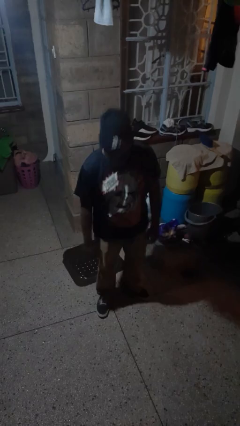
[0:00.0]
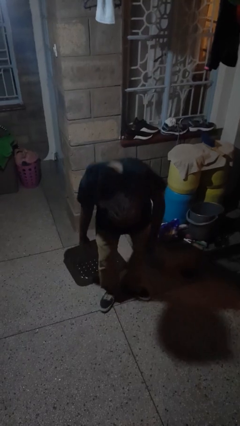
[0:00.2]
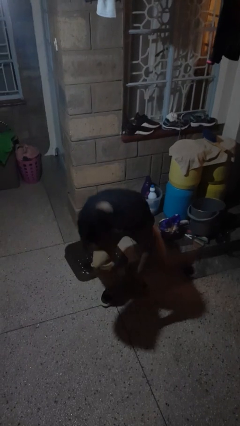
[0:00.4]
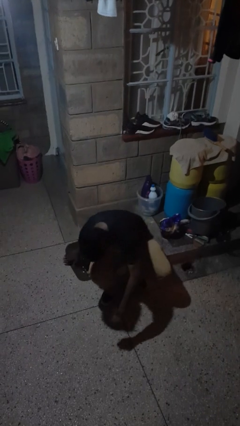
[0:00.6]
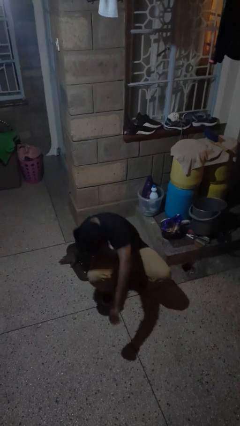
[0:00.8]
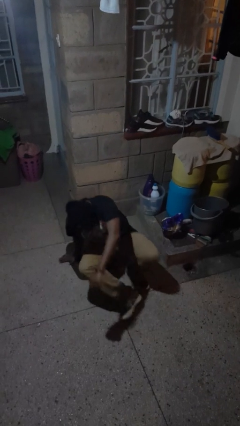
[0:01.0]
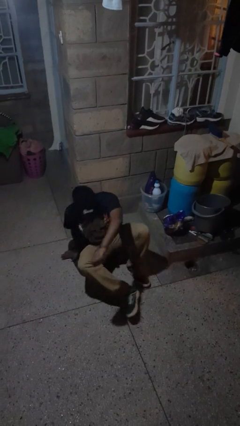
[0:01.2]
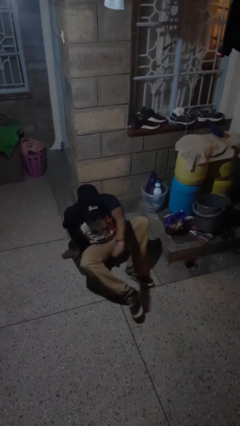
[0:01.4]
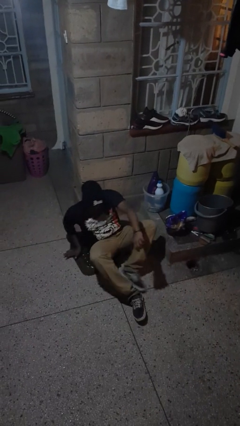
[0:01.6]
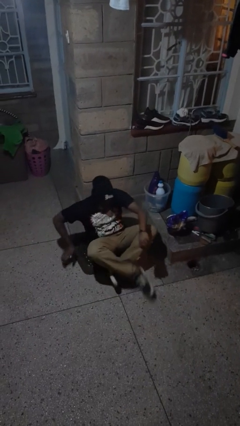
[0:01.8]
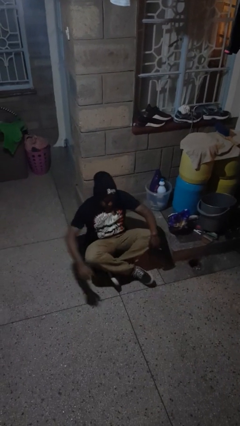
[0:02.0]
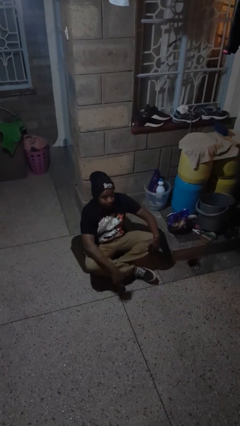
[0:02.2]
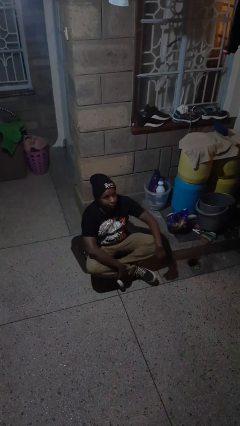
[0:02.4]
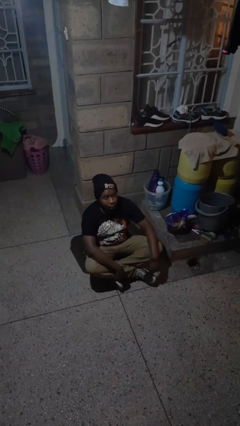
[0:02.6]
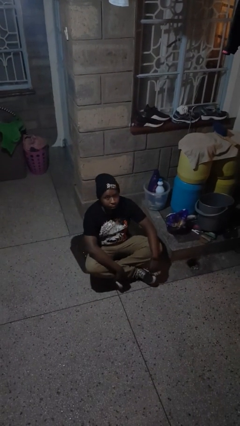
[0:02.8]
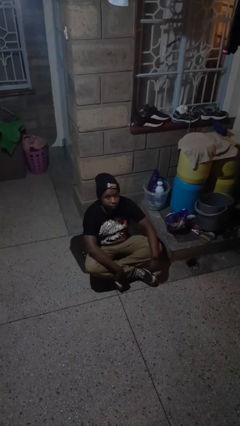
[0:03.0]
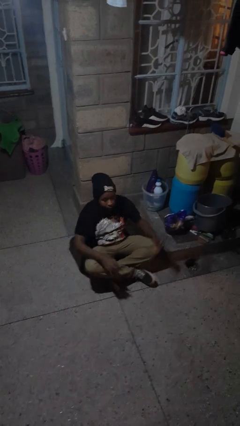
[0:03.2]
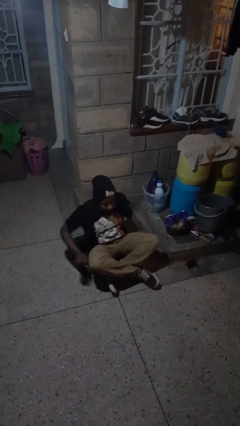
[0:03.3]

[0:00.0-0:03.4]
person sits crisscross

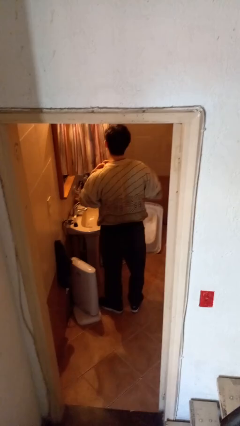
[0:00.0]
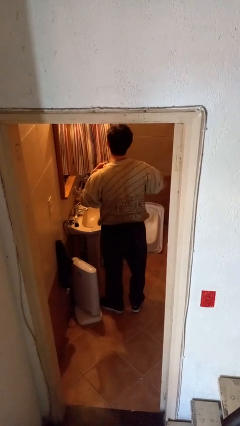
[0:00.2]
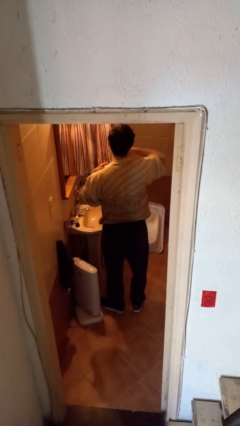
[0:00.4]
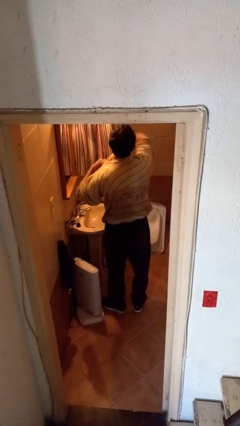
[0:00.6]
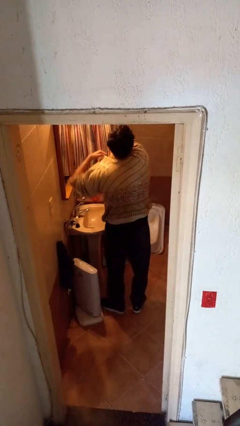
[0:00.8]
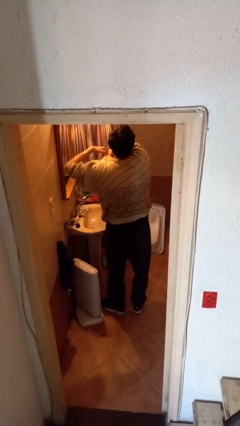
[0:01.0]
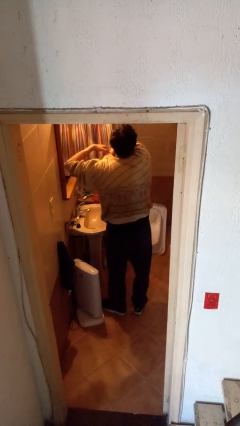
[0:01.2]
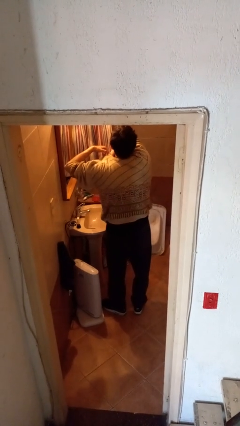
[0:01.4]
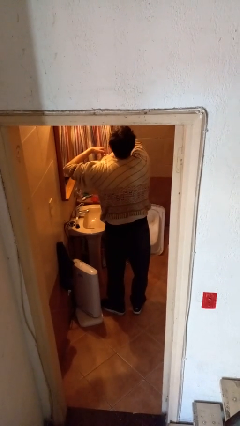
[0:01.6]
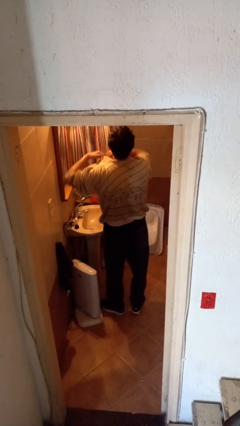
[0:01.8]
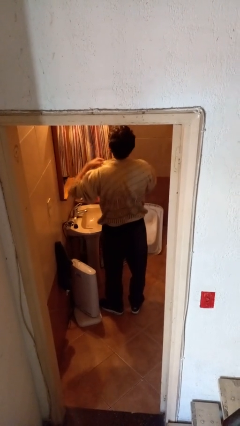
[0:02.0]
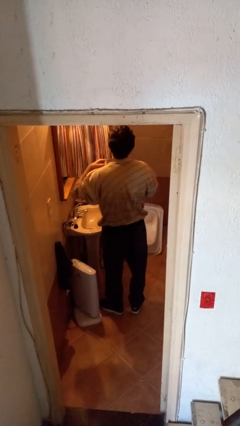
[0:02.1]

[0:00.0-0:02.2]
person applies deodorant

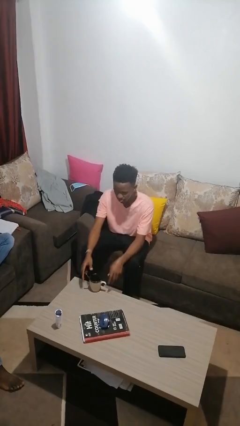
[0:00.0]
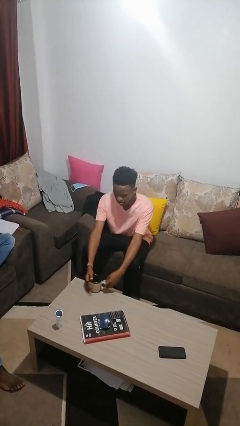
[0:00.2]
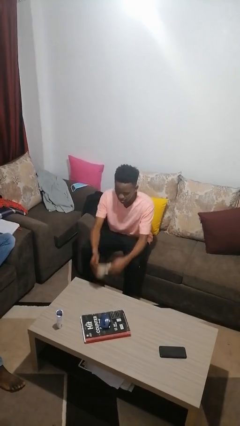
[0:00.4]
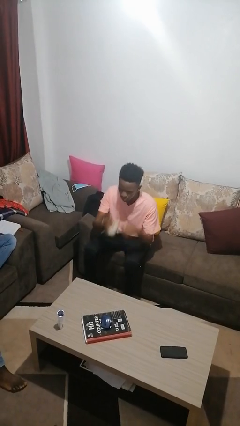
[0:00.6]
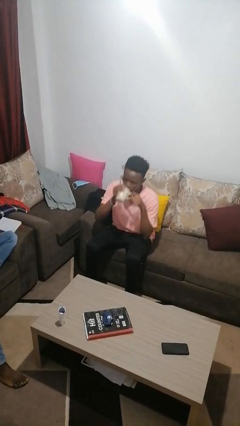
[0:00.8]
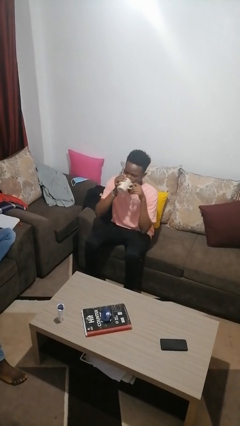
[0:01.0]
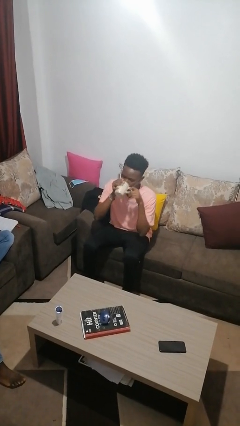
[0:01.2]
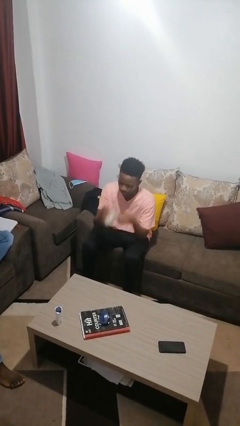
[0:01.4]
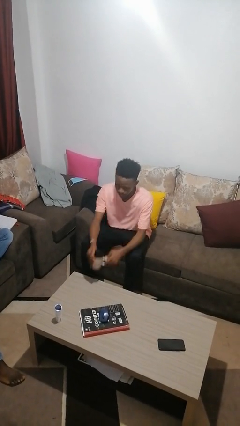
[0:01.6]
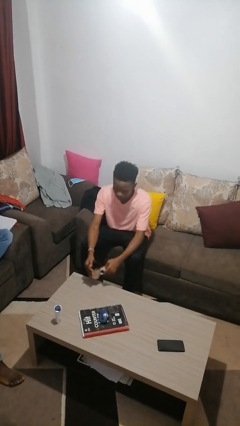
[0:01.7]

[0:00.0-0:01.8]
person drinks from mug

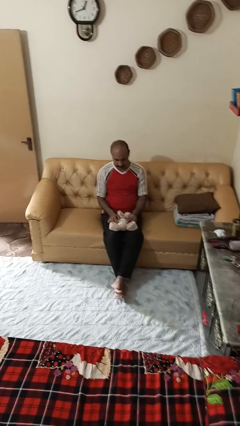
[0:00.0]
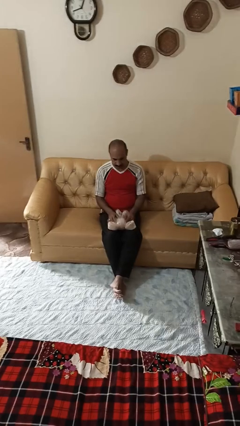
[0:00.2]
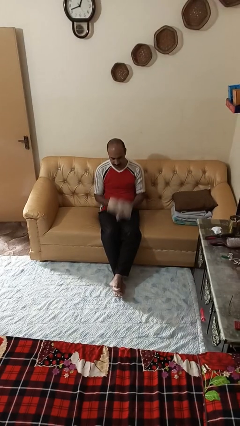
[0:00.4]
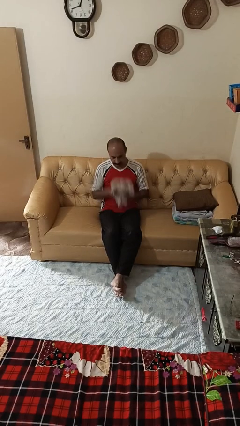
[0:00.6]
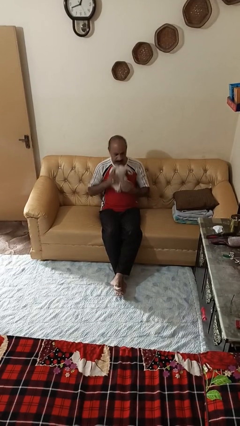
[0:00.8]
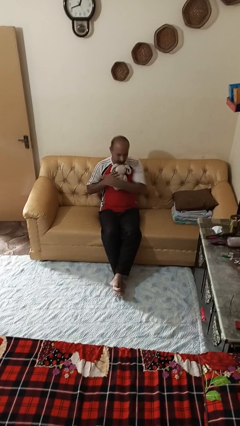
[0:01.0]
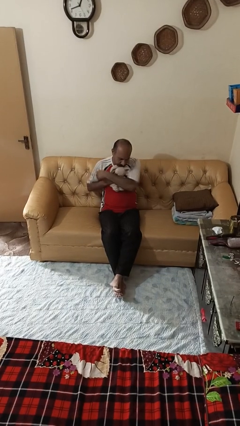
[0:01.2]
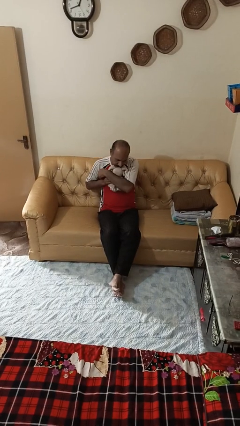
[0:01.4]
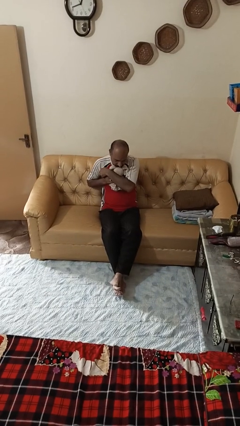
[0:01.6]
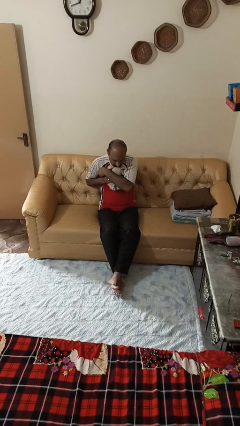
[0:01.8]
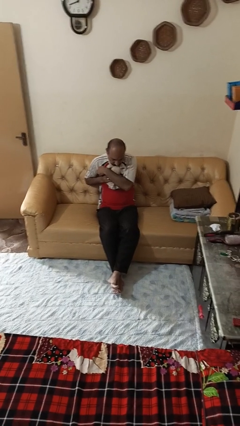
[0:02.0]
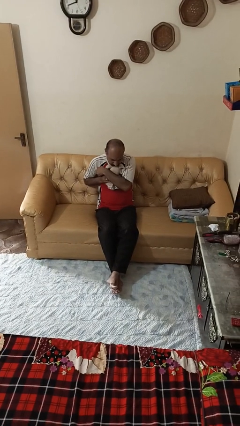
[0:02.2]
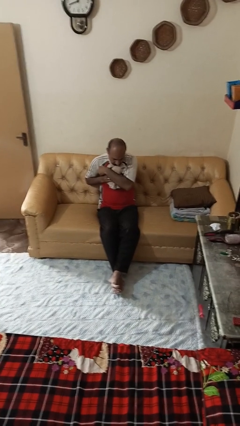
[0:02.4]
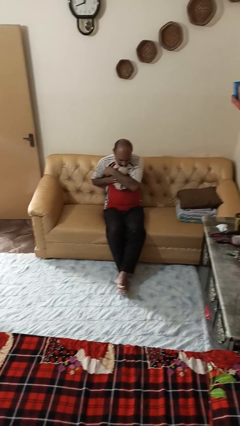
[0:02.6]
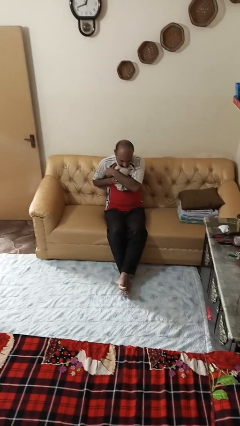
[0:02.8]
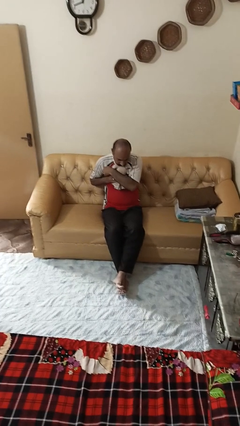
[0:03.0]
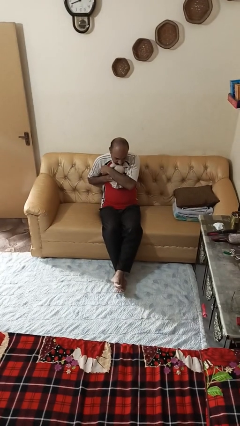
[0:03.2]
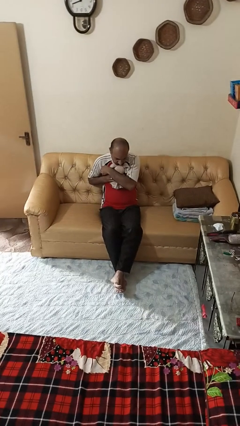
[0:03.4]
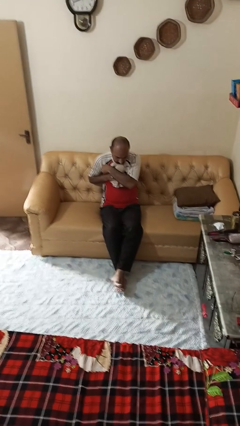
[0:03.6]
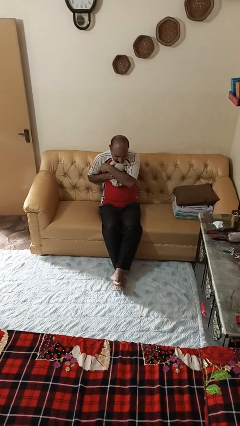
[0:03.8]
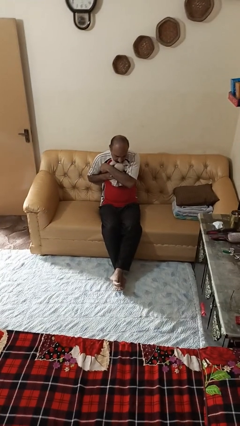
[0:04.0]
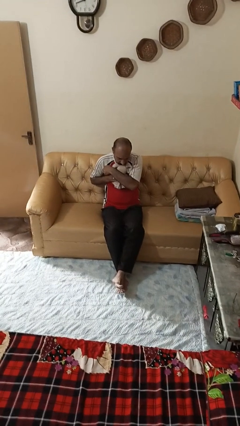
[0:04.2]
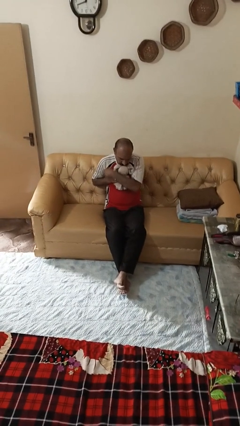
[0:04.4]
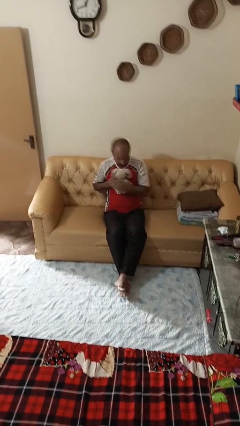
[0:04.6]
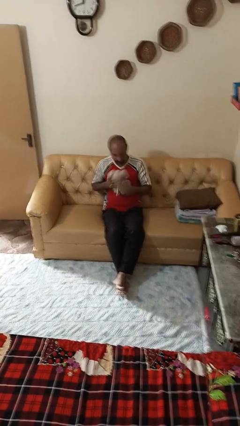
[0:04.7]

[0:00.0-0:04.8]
person hugs stuffed animal

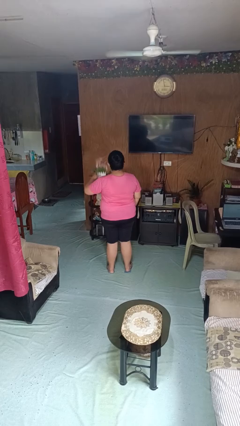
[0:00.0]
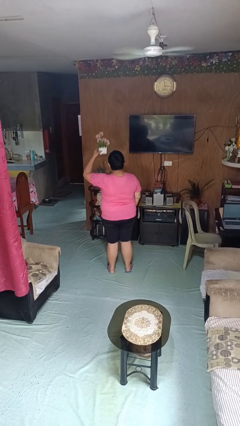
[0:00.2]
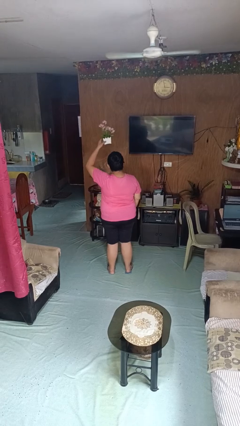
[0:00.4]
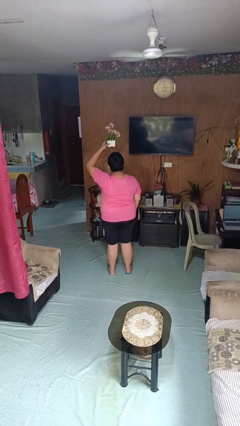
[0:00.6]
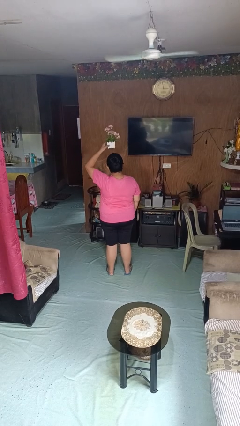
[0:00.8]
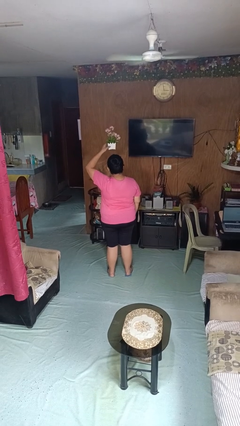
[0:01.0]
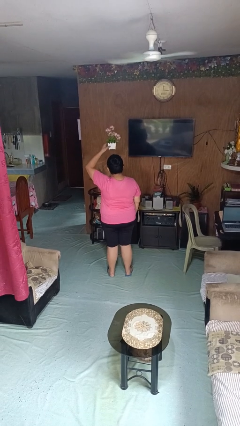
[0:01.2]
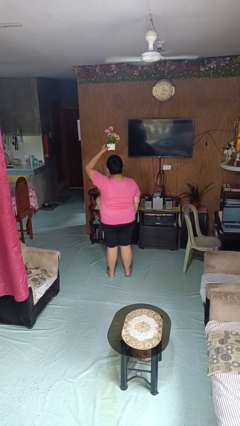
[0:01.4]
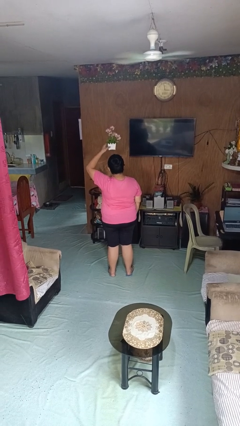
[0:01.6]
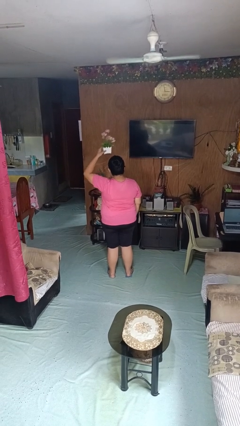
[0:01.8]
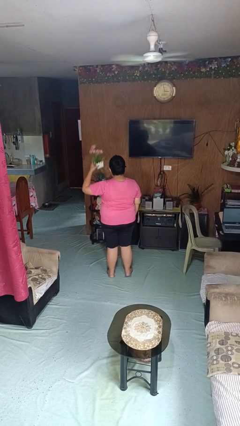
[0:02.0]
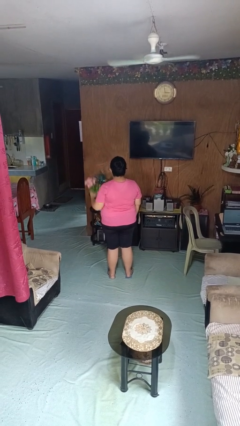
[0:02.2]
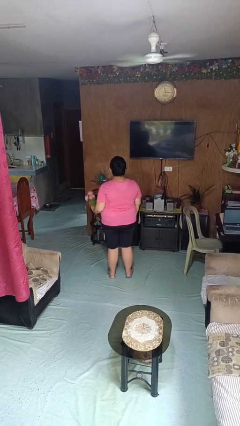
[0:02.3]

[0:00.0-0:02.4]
person holds object above head

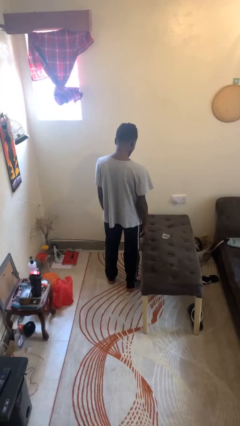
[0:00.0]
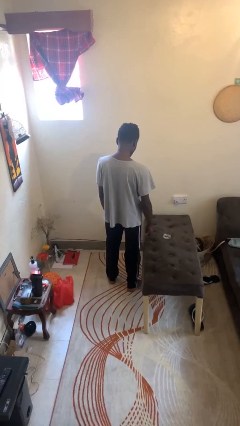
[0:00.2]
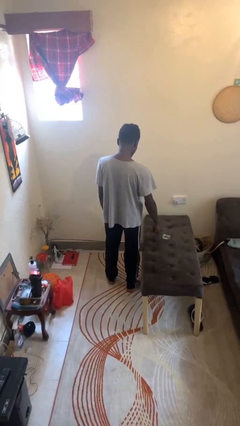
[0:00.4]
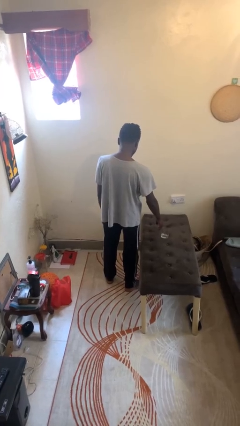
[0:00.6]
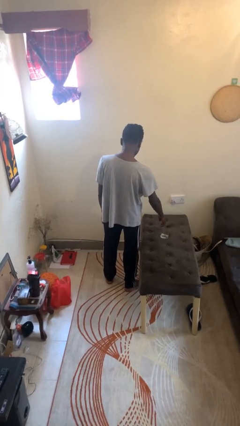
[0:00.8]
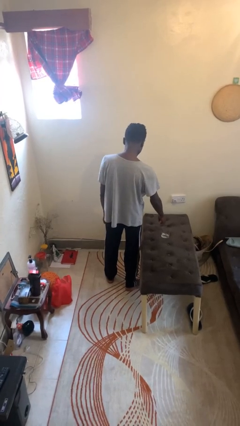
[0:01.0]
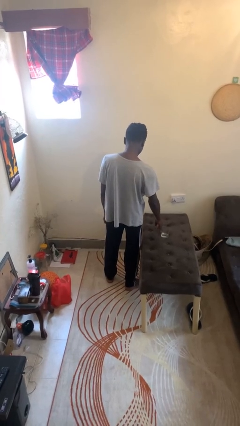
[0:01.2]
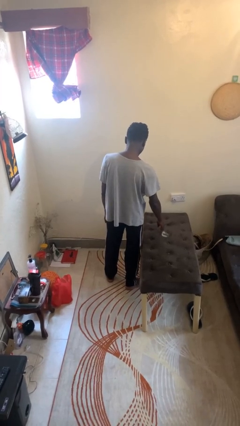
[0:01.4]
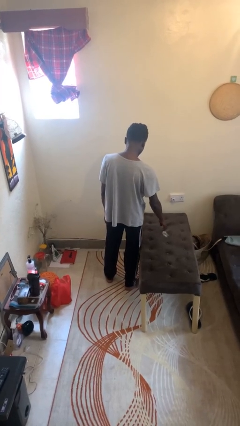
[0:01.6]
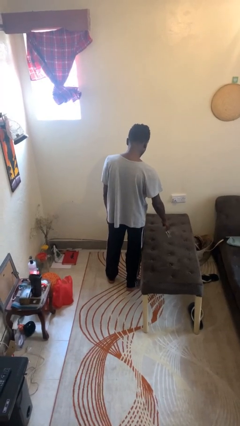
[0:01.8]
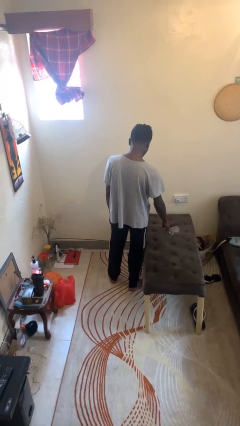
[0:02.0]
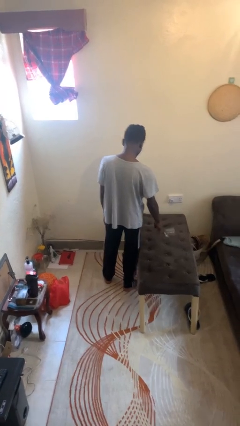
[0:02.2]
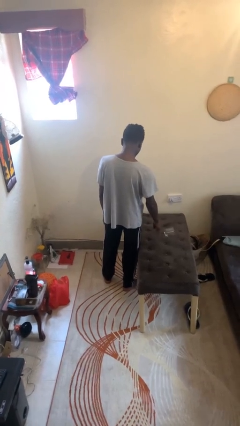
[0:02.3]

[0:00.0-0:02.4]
person knocks over glass

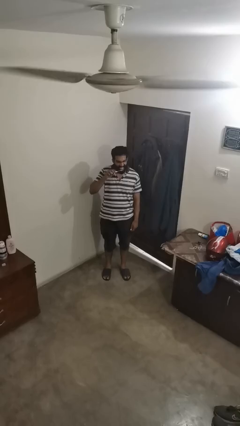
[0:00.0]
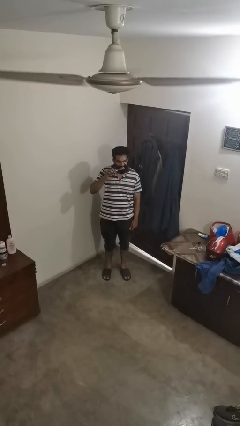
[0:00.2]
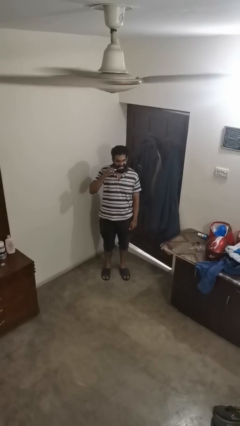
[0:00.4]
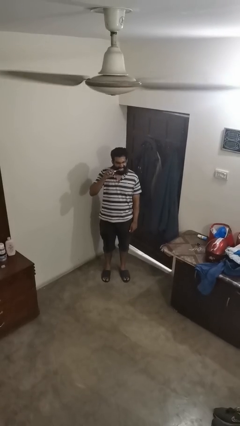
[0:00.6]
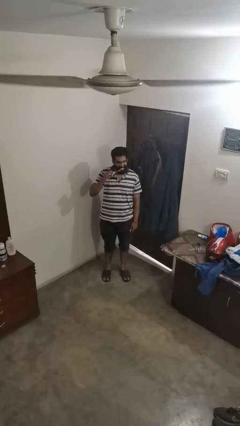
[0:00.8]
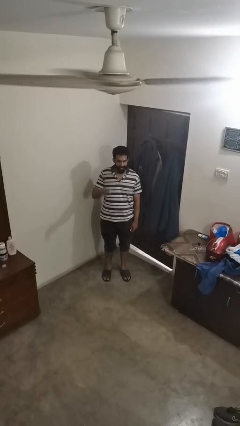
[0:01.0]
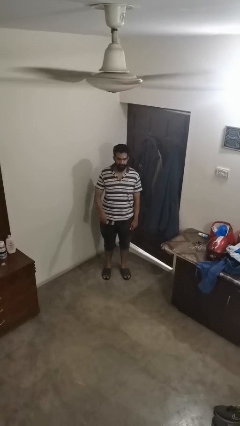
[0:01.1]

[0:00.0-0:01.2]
person brushes teeth
